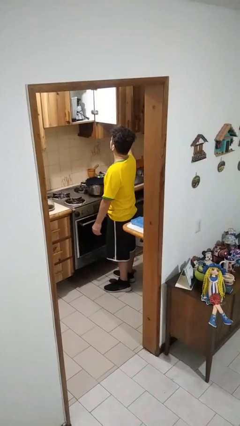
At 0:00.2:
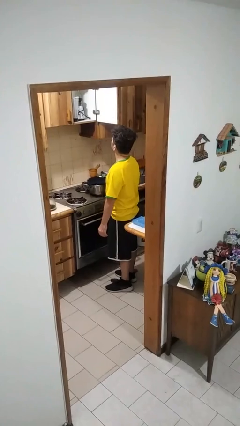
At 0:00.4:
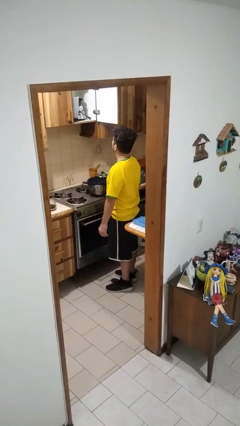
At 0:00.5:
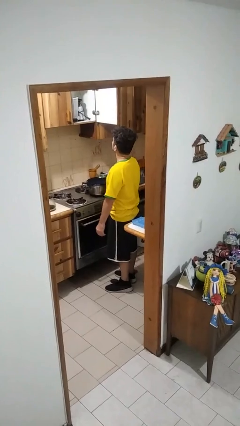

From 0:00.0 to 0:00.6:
person opens cabinet

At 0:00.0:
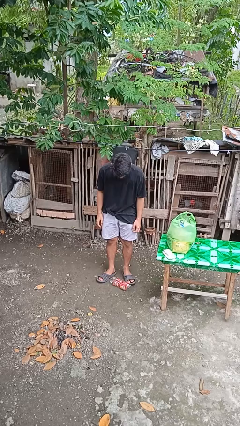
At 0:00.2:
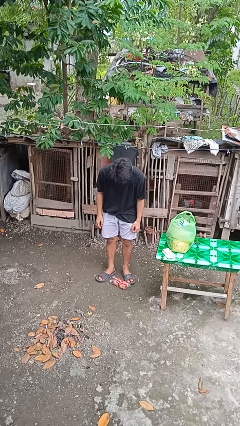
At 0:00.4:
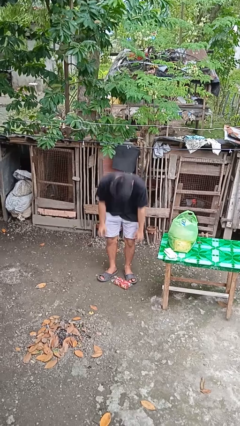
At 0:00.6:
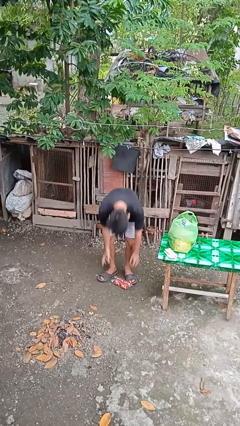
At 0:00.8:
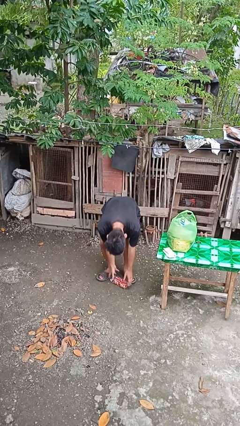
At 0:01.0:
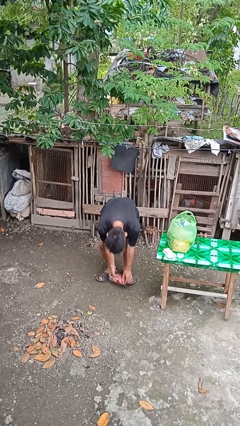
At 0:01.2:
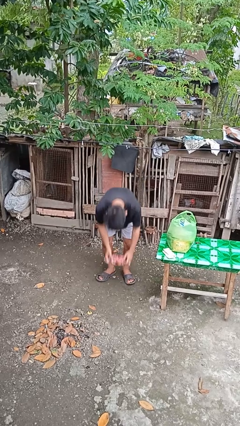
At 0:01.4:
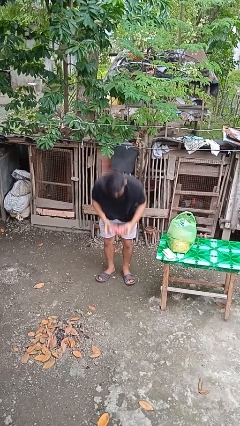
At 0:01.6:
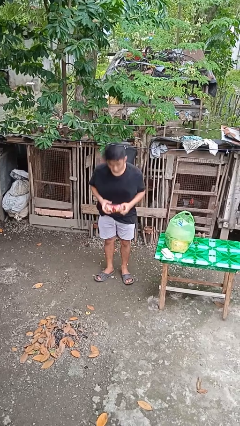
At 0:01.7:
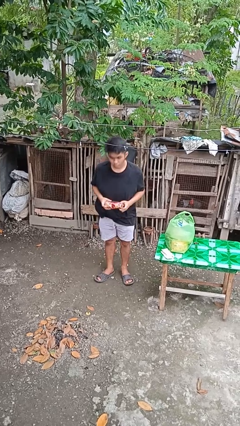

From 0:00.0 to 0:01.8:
person picks up object from floor

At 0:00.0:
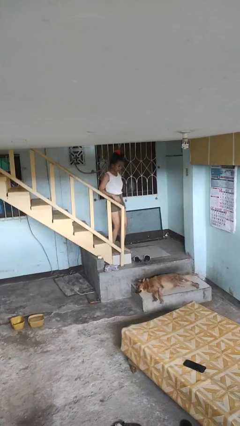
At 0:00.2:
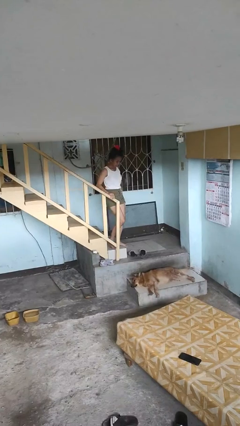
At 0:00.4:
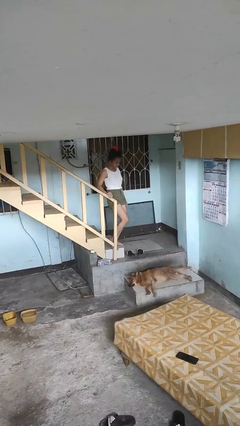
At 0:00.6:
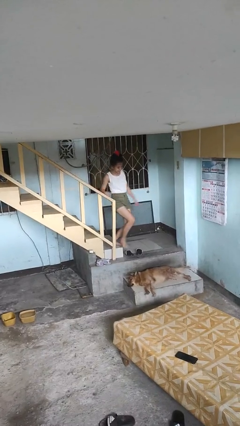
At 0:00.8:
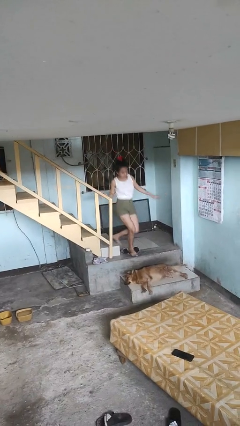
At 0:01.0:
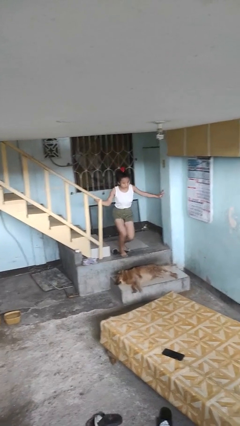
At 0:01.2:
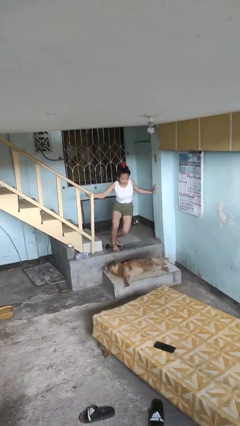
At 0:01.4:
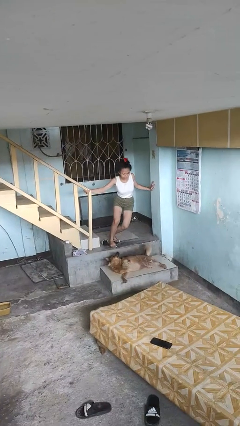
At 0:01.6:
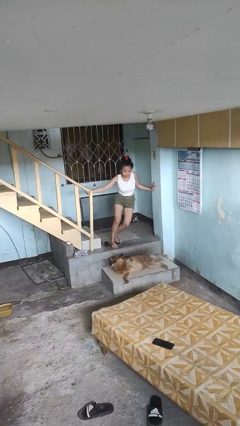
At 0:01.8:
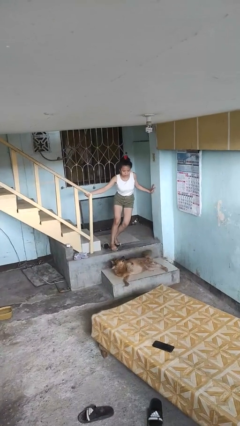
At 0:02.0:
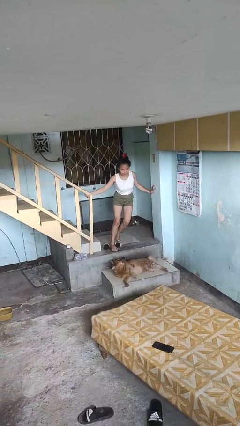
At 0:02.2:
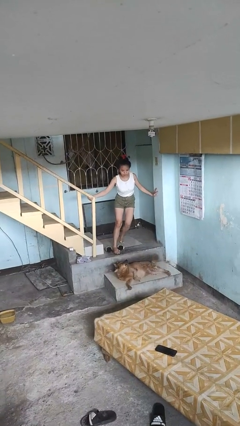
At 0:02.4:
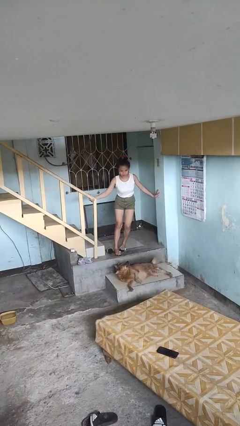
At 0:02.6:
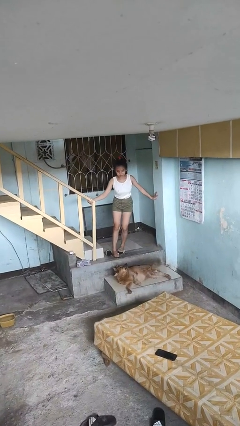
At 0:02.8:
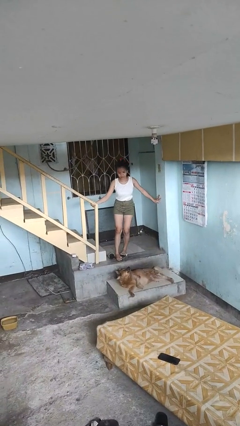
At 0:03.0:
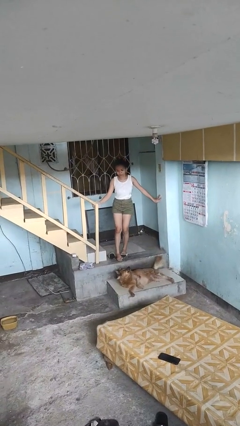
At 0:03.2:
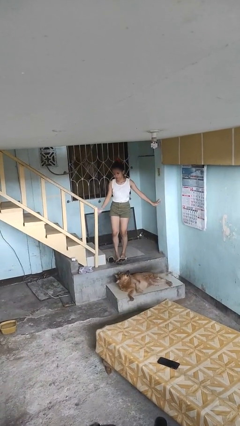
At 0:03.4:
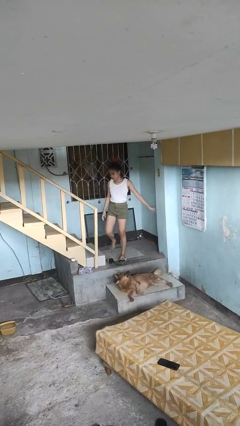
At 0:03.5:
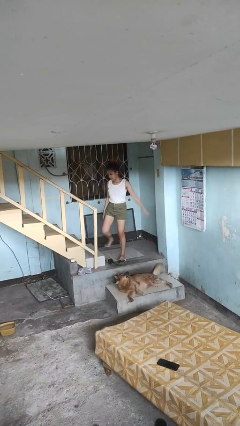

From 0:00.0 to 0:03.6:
person trips on stair

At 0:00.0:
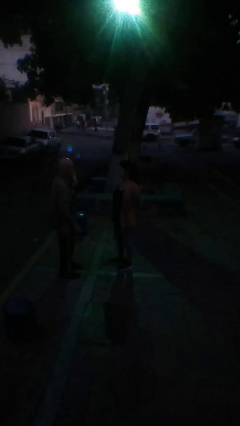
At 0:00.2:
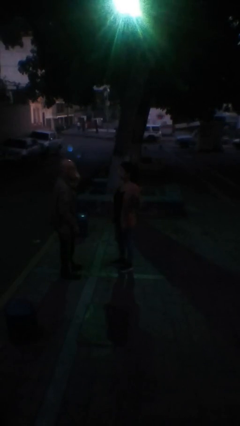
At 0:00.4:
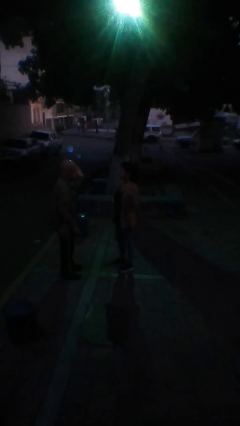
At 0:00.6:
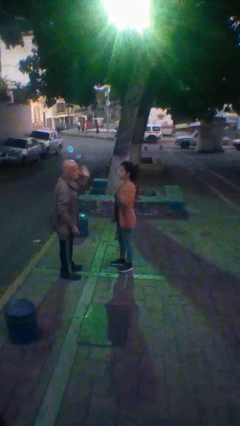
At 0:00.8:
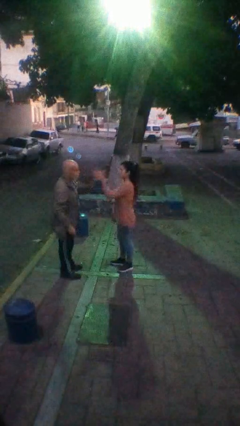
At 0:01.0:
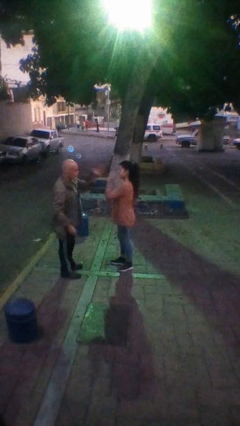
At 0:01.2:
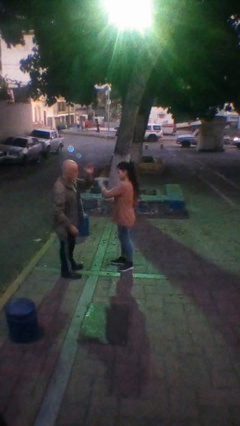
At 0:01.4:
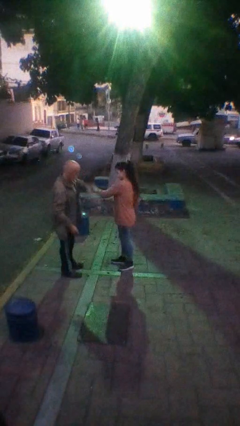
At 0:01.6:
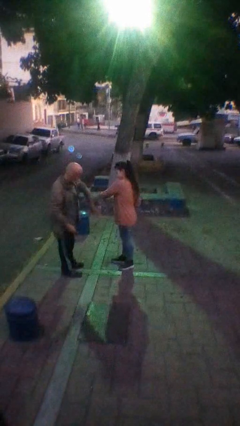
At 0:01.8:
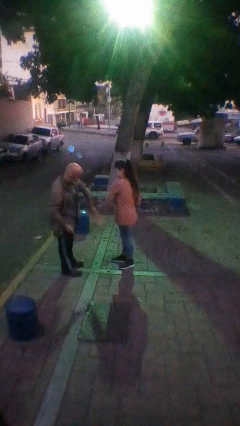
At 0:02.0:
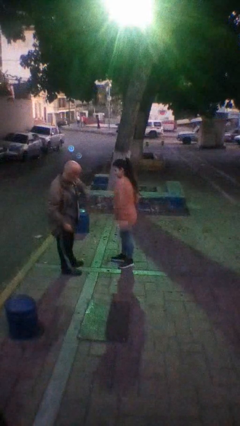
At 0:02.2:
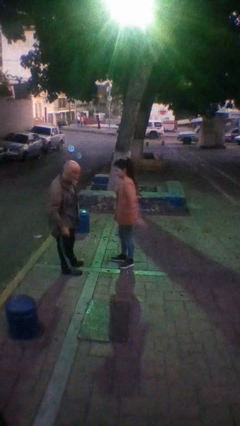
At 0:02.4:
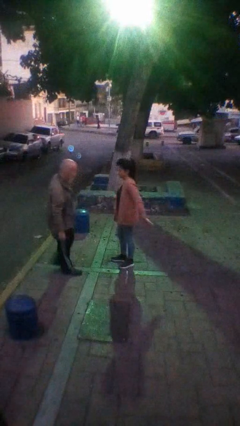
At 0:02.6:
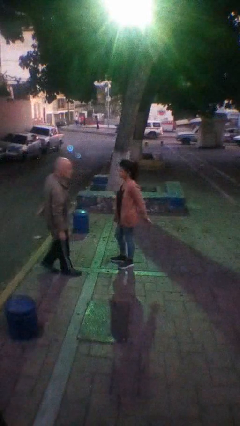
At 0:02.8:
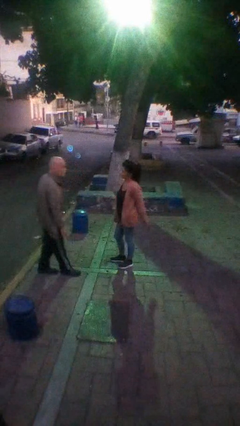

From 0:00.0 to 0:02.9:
person highfives hand

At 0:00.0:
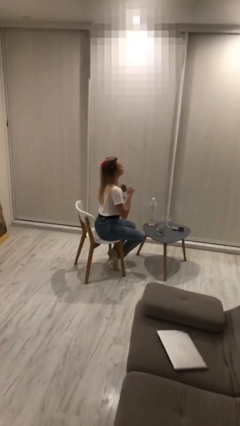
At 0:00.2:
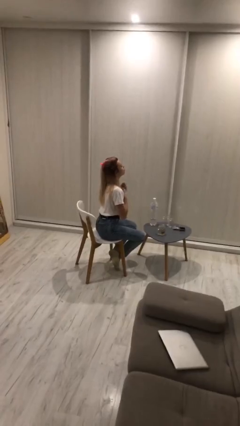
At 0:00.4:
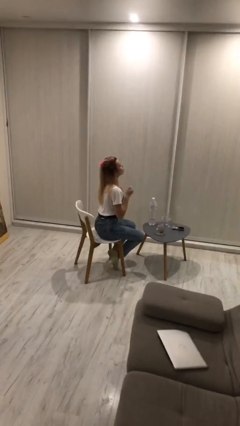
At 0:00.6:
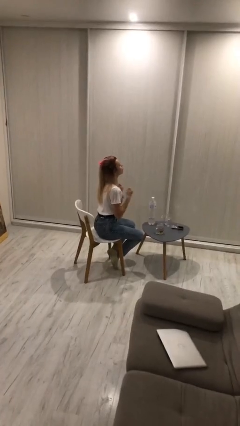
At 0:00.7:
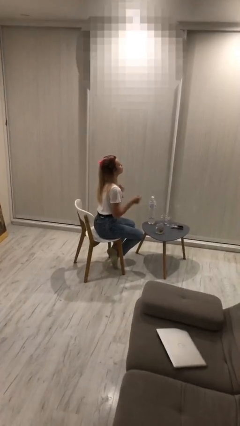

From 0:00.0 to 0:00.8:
person drums on chest

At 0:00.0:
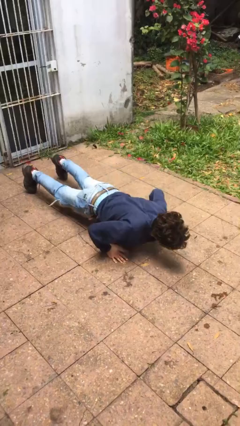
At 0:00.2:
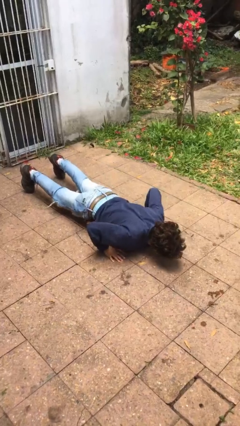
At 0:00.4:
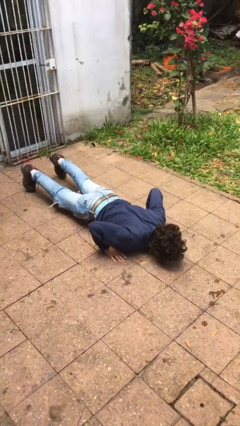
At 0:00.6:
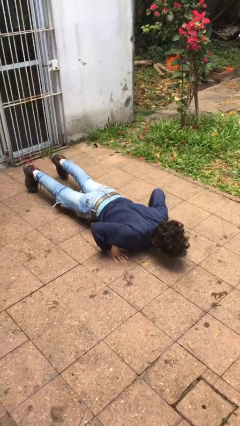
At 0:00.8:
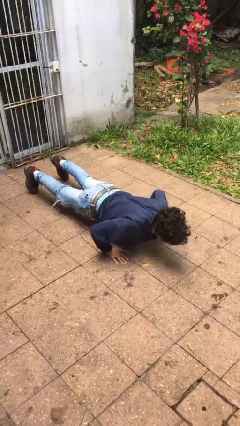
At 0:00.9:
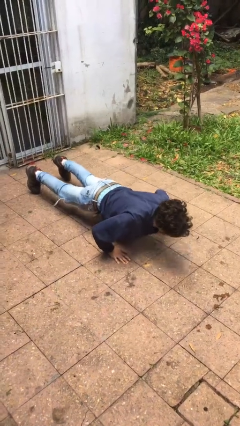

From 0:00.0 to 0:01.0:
person exercises with pushup

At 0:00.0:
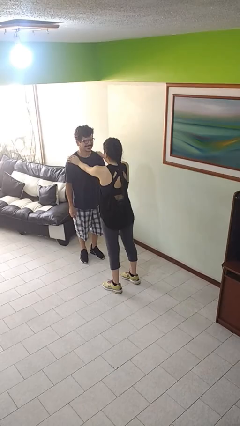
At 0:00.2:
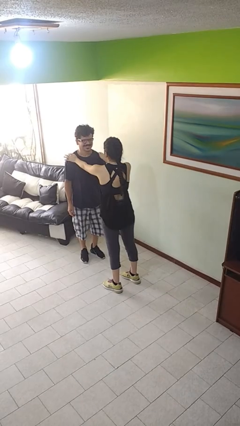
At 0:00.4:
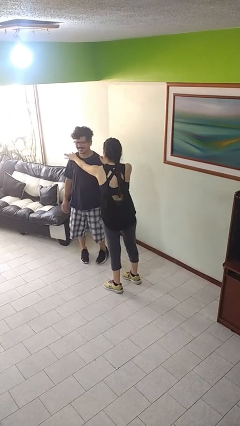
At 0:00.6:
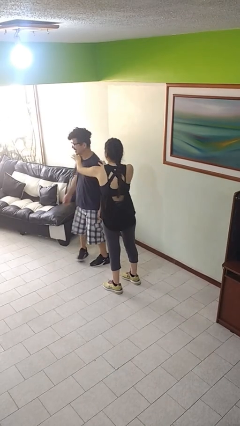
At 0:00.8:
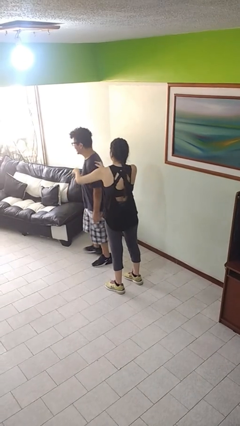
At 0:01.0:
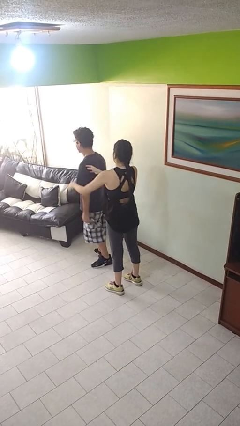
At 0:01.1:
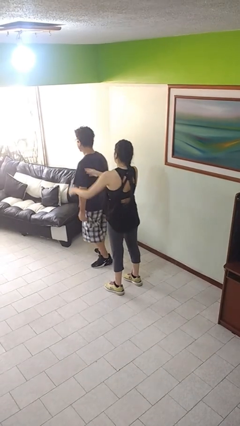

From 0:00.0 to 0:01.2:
person spins person around

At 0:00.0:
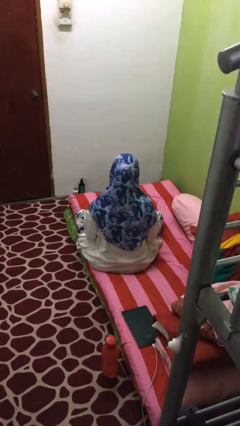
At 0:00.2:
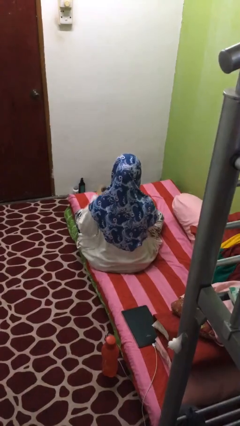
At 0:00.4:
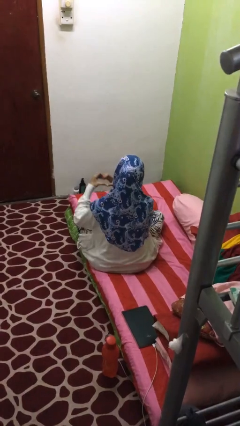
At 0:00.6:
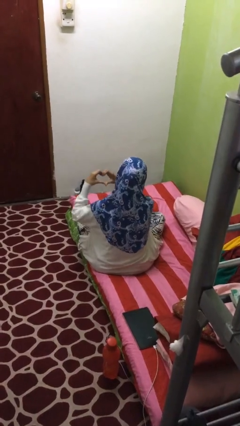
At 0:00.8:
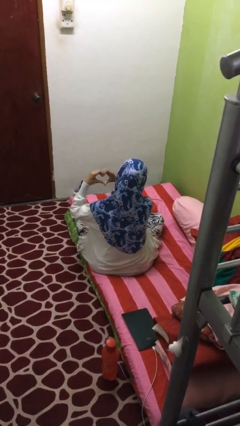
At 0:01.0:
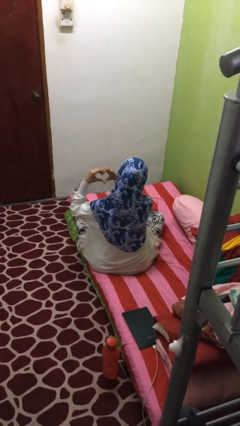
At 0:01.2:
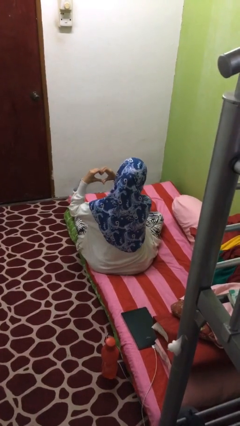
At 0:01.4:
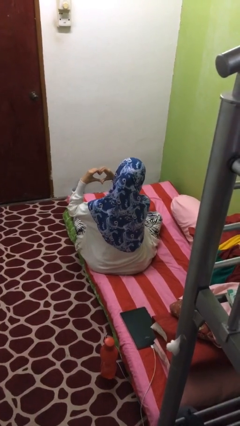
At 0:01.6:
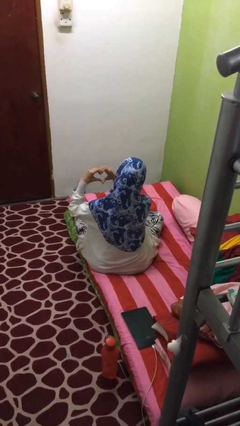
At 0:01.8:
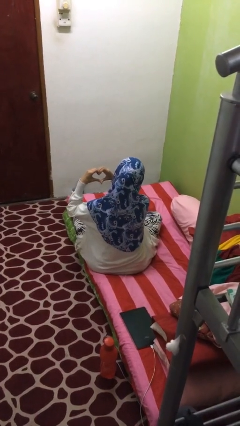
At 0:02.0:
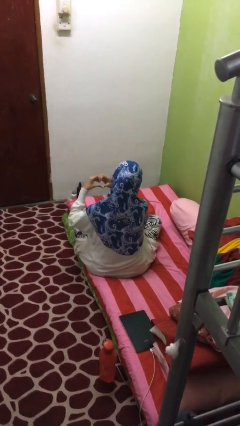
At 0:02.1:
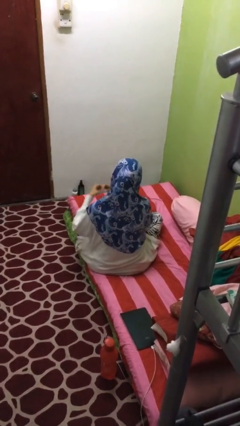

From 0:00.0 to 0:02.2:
person gestures heart

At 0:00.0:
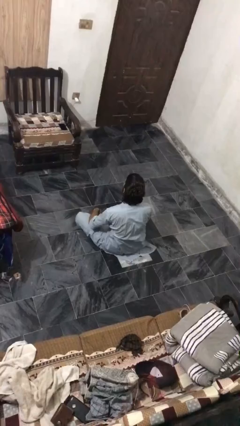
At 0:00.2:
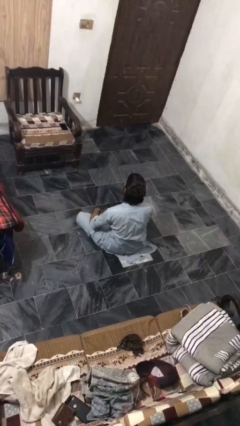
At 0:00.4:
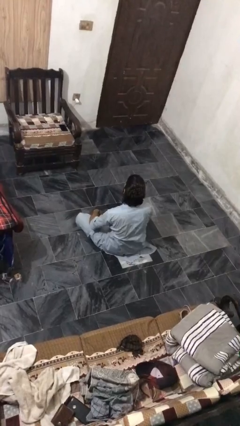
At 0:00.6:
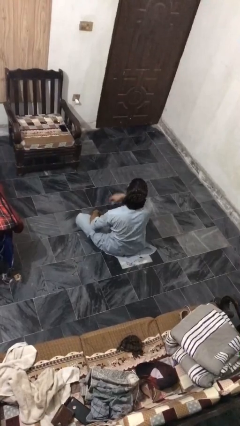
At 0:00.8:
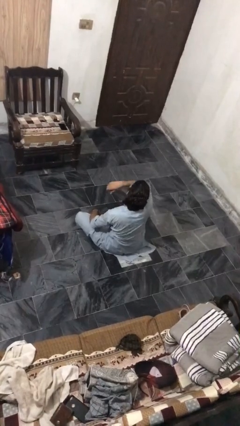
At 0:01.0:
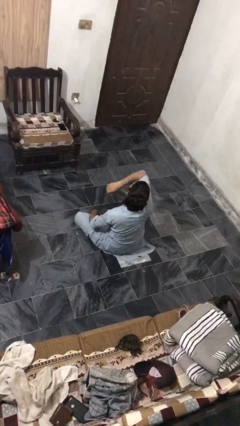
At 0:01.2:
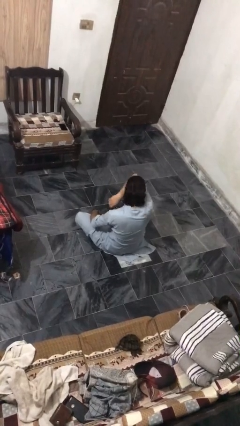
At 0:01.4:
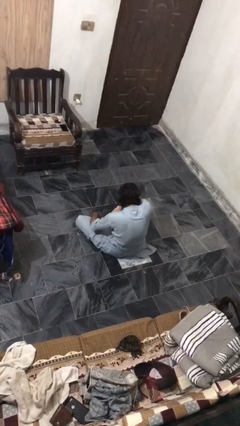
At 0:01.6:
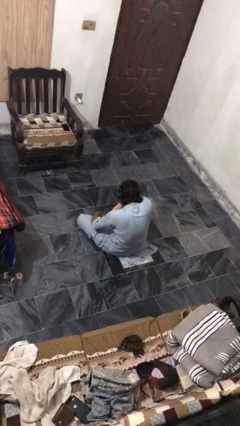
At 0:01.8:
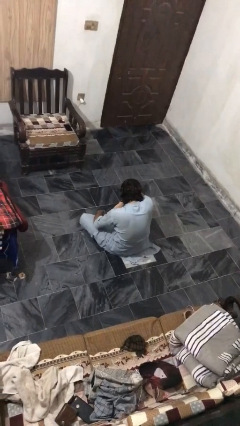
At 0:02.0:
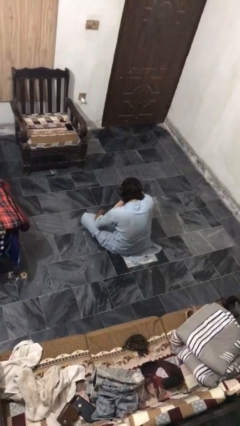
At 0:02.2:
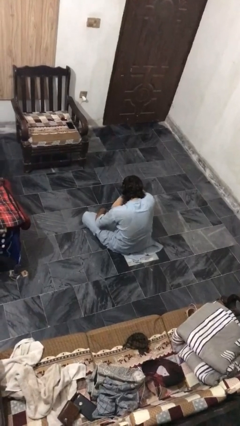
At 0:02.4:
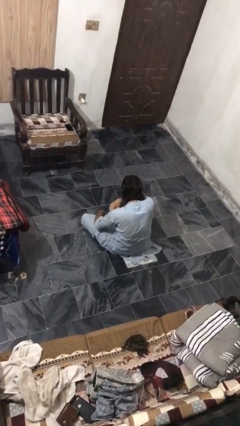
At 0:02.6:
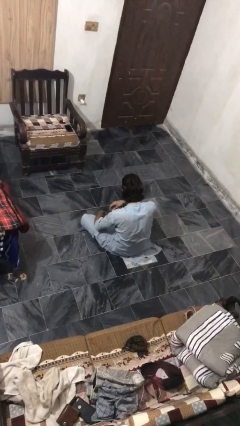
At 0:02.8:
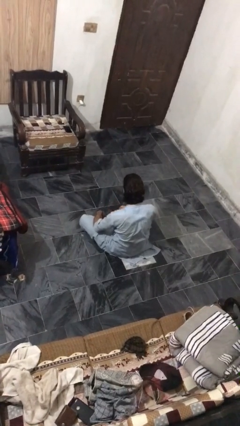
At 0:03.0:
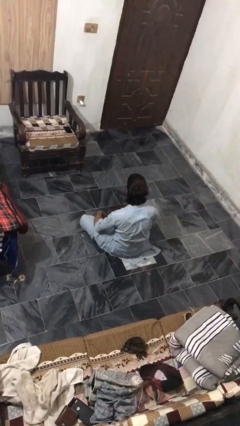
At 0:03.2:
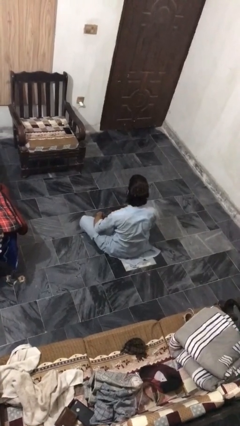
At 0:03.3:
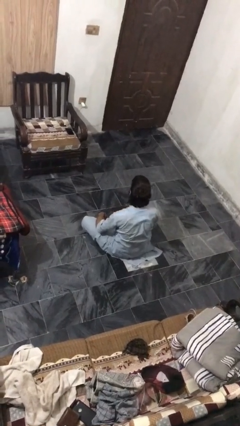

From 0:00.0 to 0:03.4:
person sneezes into arm
